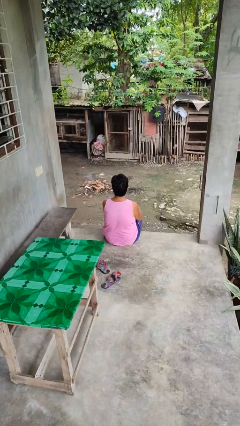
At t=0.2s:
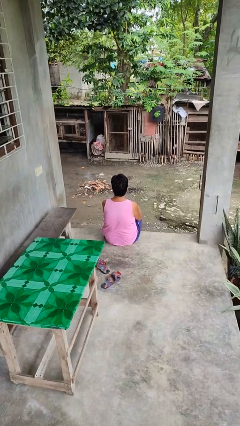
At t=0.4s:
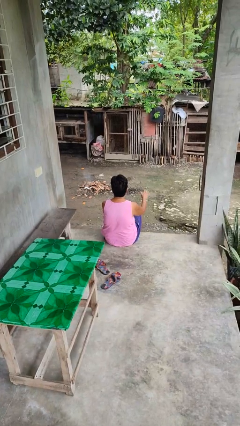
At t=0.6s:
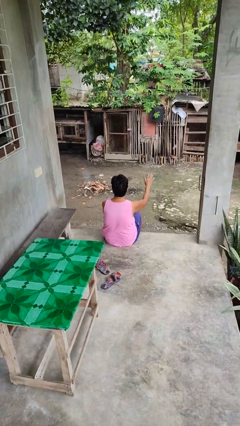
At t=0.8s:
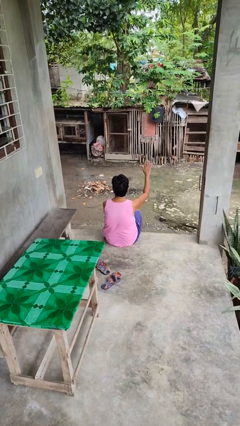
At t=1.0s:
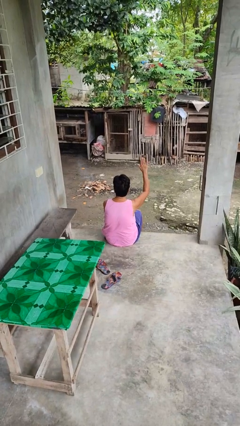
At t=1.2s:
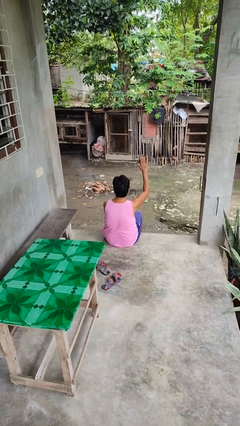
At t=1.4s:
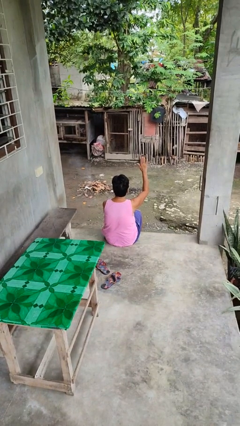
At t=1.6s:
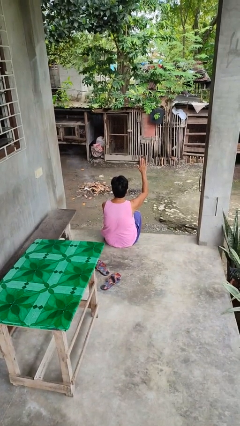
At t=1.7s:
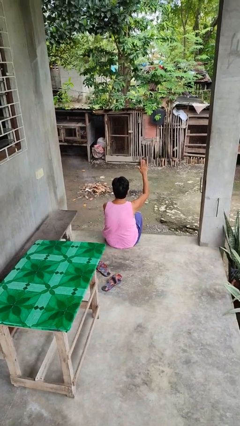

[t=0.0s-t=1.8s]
person gestures raise hand

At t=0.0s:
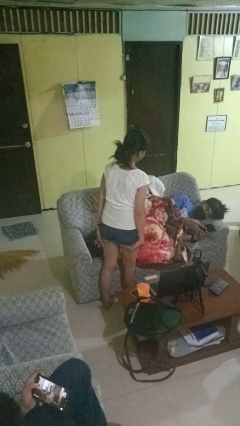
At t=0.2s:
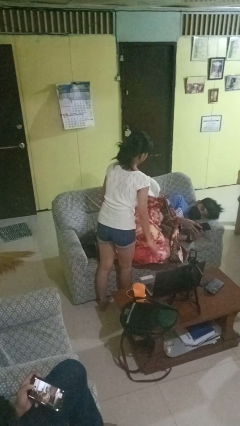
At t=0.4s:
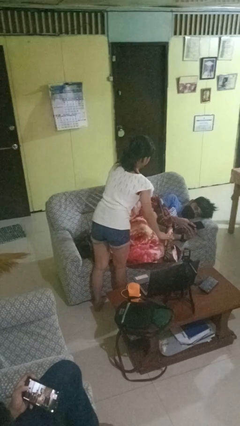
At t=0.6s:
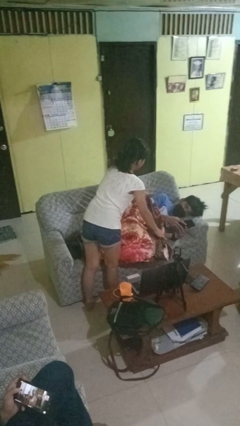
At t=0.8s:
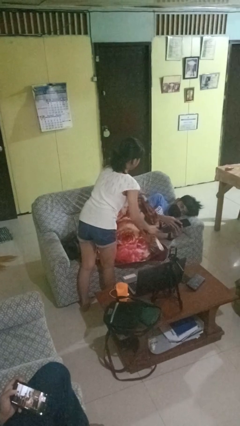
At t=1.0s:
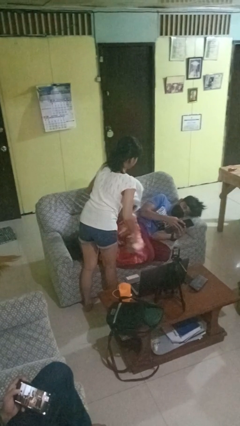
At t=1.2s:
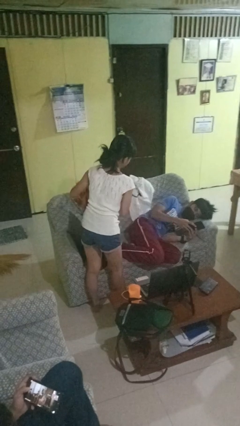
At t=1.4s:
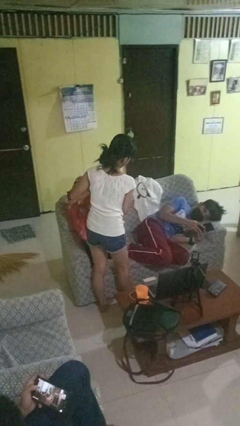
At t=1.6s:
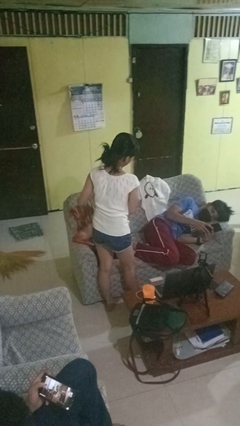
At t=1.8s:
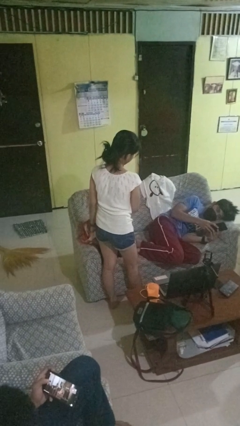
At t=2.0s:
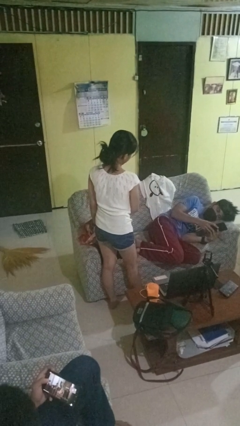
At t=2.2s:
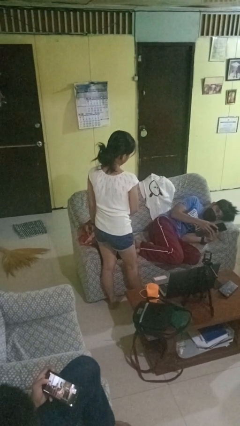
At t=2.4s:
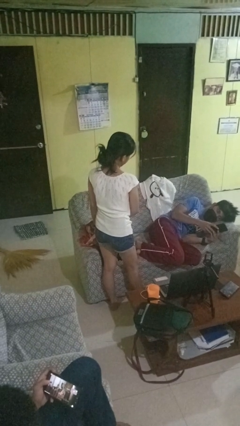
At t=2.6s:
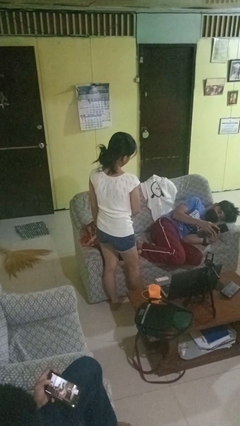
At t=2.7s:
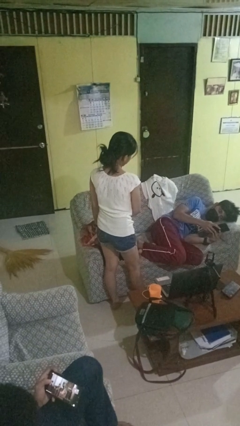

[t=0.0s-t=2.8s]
person uncovers friend with blanket

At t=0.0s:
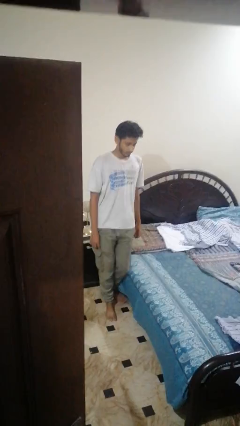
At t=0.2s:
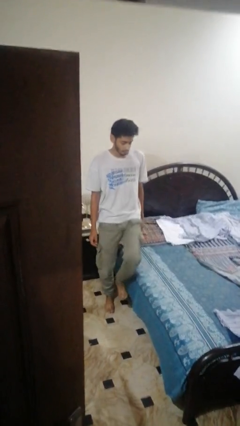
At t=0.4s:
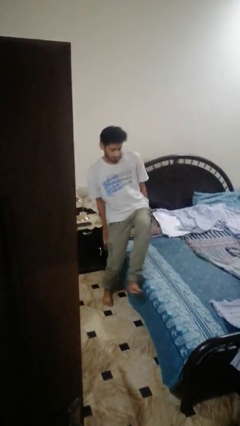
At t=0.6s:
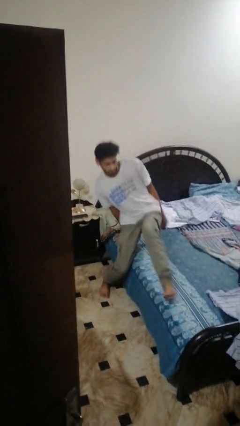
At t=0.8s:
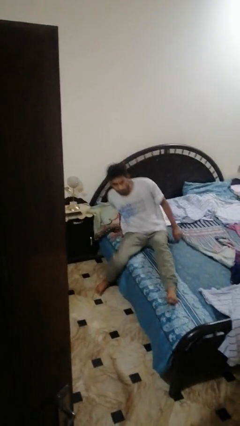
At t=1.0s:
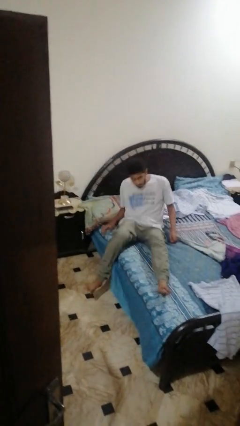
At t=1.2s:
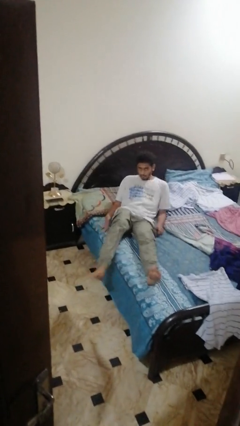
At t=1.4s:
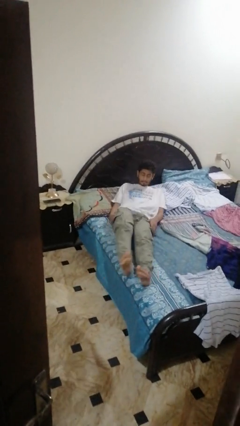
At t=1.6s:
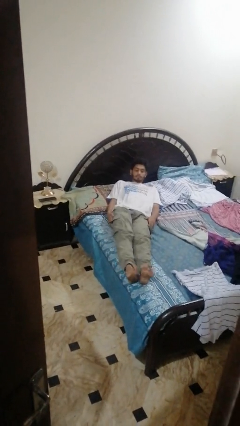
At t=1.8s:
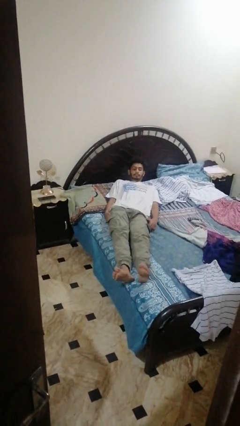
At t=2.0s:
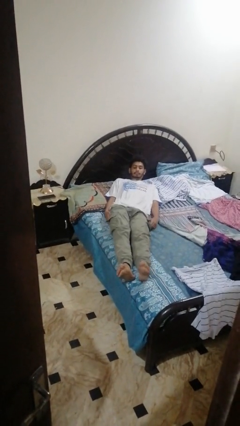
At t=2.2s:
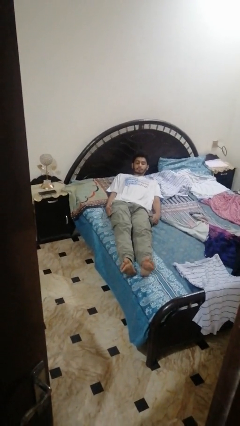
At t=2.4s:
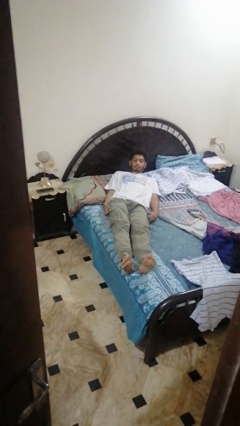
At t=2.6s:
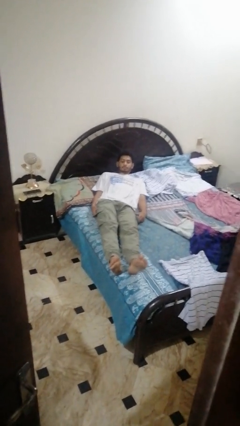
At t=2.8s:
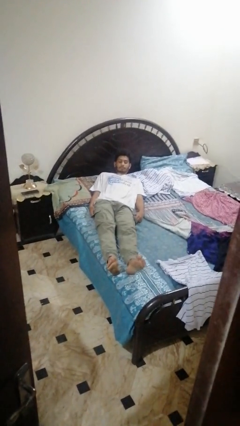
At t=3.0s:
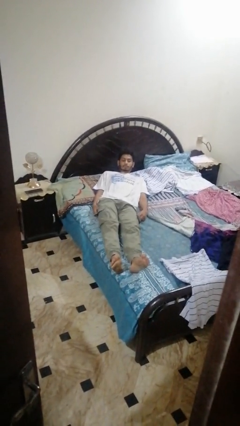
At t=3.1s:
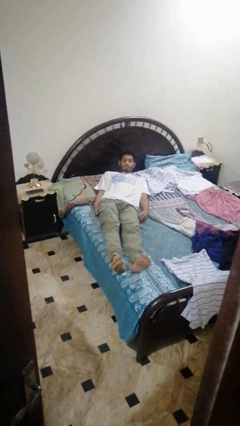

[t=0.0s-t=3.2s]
person lies down on bed

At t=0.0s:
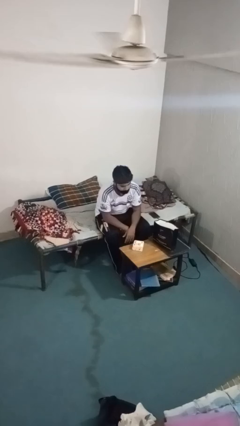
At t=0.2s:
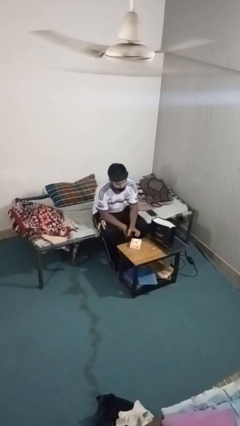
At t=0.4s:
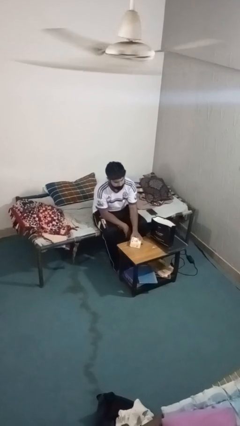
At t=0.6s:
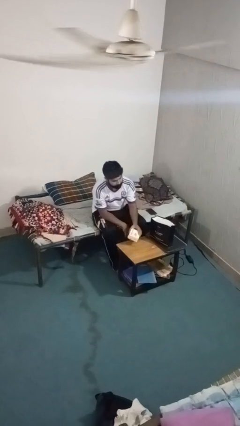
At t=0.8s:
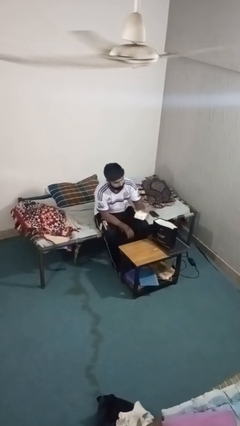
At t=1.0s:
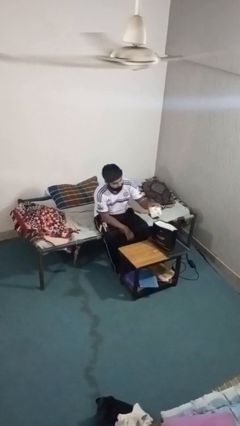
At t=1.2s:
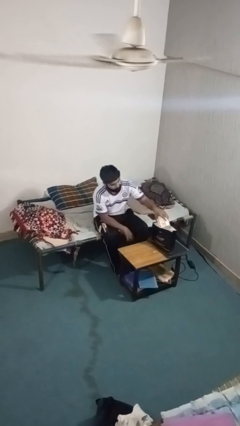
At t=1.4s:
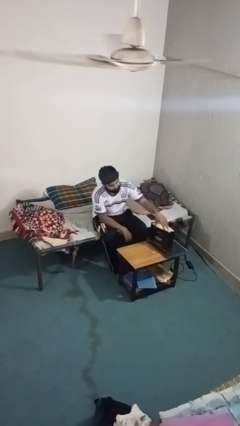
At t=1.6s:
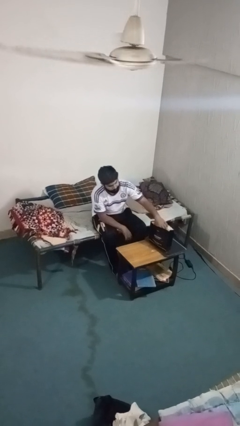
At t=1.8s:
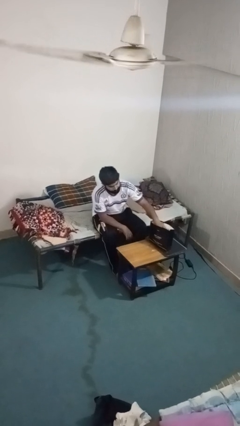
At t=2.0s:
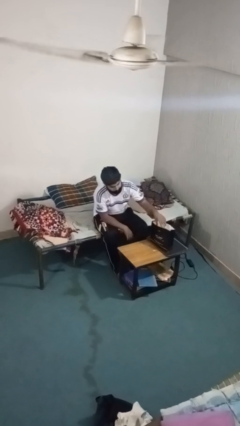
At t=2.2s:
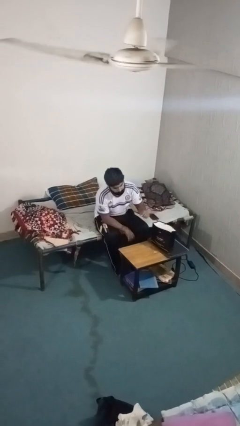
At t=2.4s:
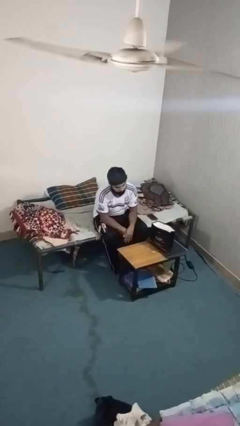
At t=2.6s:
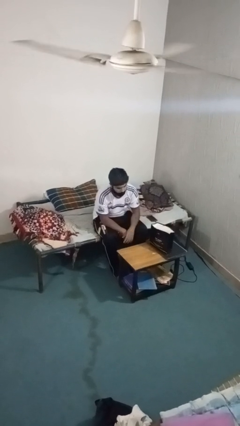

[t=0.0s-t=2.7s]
person puts object into bag

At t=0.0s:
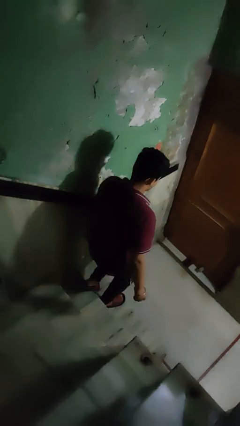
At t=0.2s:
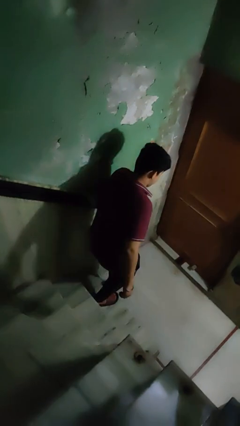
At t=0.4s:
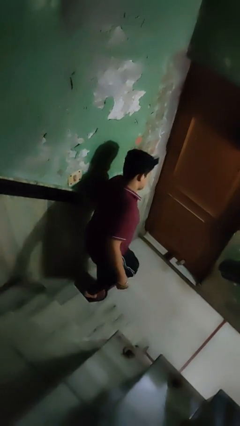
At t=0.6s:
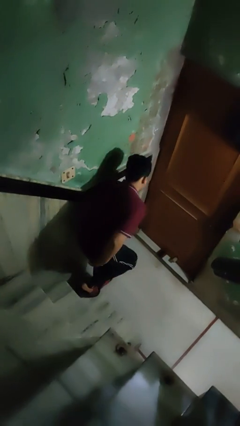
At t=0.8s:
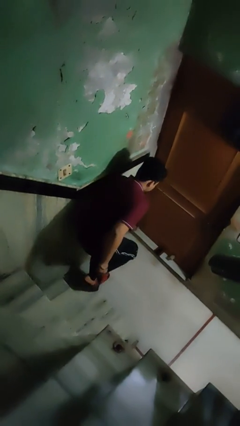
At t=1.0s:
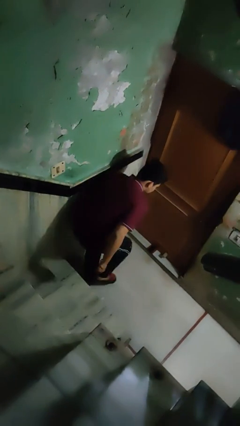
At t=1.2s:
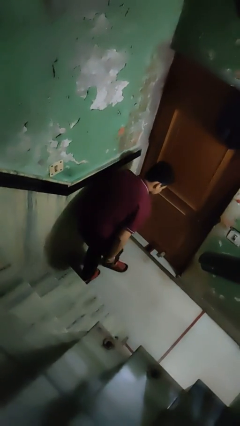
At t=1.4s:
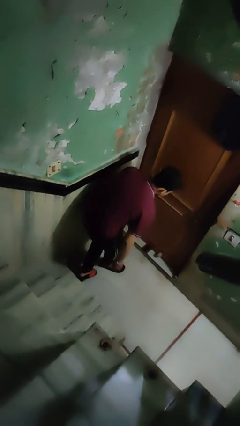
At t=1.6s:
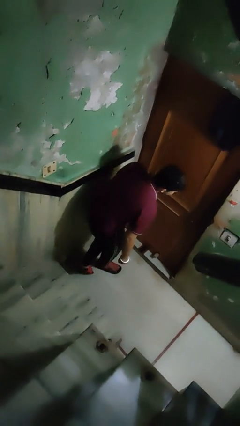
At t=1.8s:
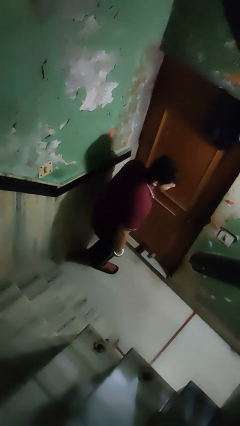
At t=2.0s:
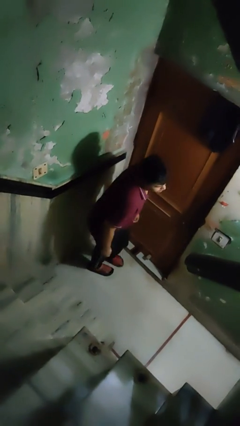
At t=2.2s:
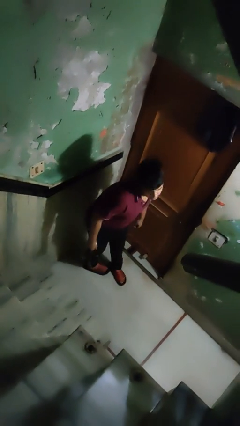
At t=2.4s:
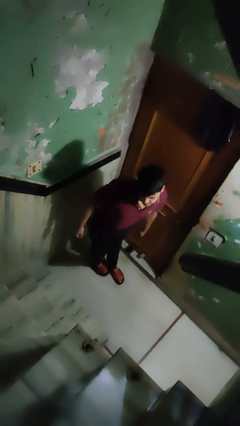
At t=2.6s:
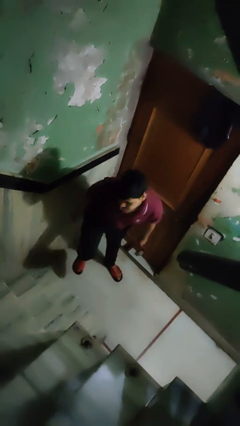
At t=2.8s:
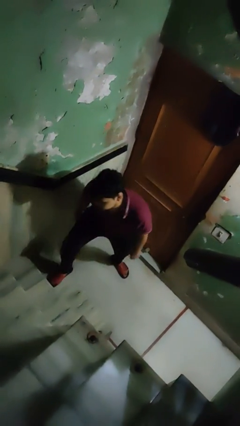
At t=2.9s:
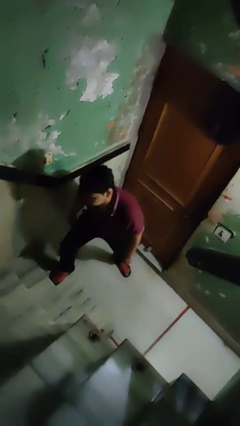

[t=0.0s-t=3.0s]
person trips on stair

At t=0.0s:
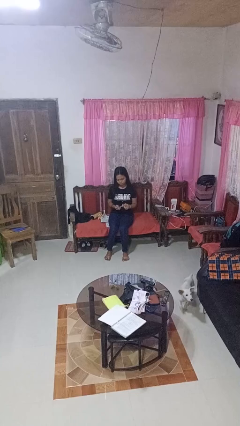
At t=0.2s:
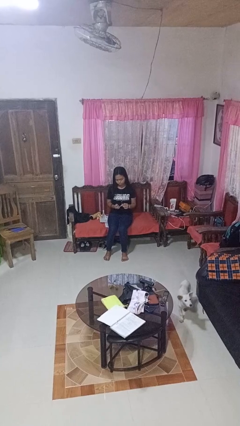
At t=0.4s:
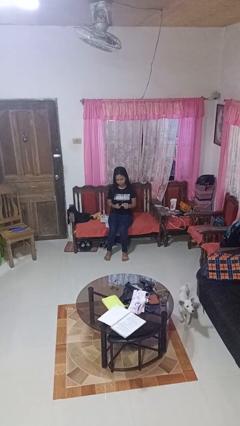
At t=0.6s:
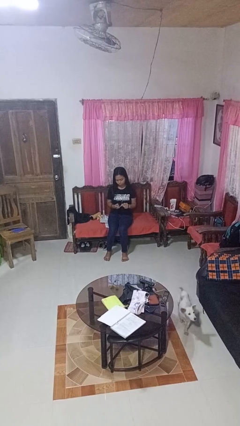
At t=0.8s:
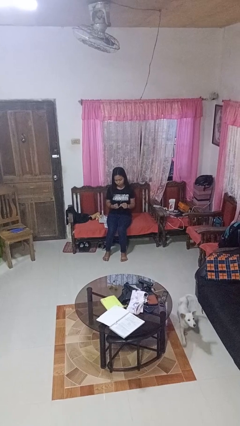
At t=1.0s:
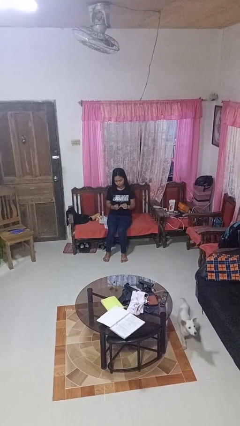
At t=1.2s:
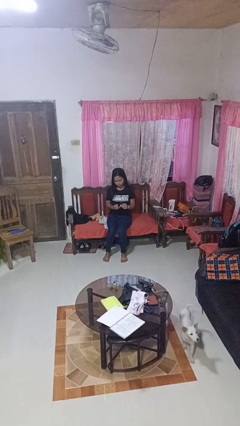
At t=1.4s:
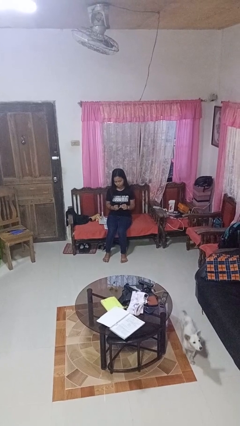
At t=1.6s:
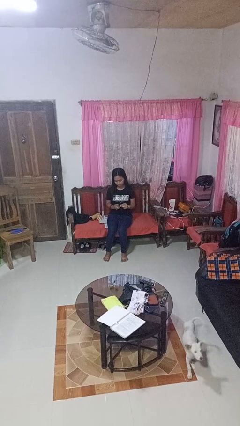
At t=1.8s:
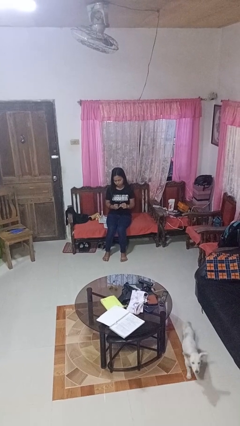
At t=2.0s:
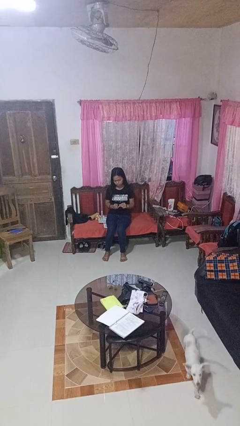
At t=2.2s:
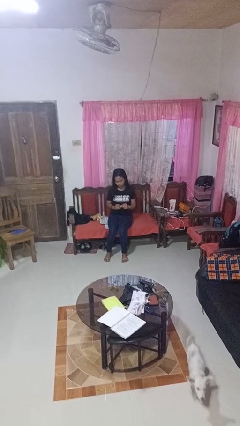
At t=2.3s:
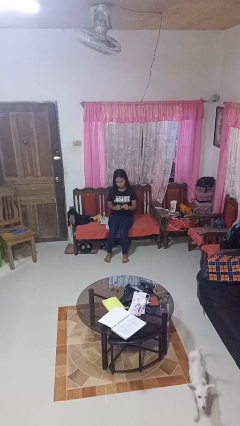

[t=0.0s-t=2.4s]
person clips fingernails

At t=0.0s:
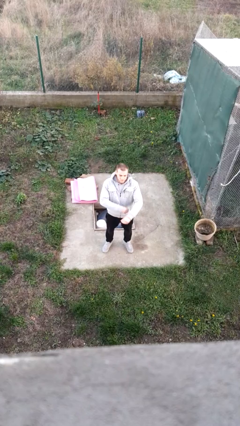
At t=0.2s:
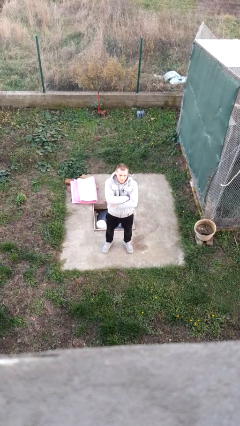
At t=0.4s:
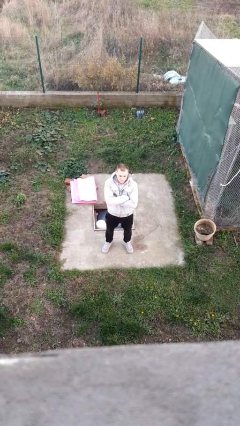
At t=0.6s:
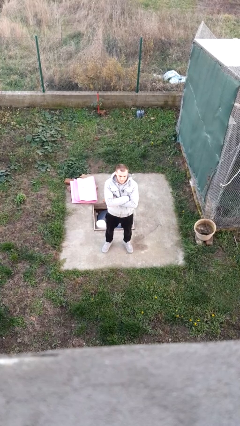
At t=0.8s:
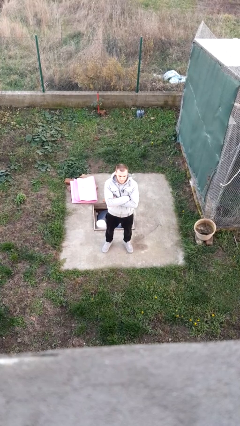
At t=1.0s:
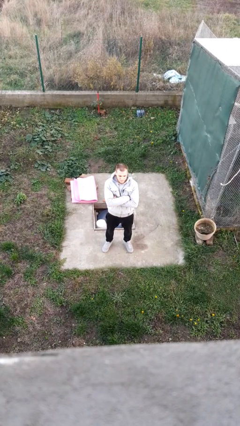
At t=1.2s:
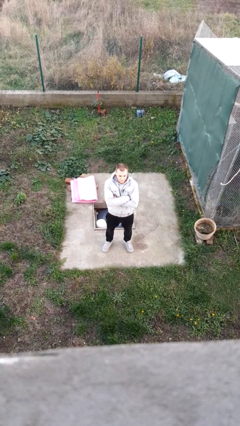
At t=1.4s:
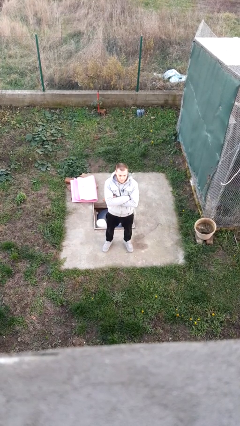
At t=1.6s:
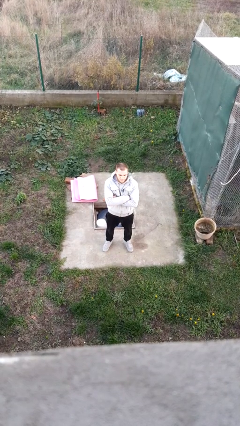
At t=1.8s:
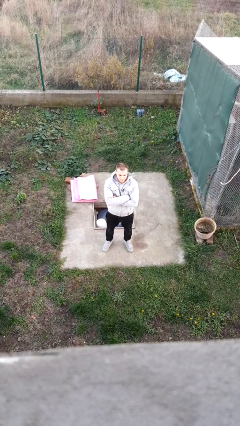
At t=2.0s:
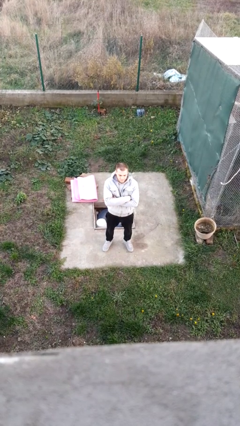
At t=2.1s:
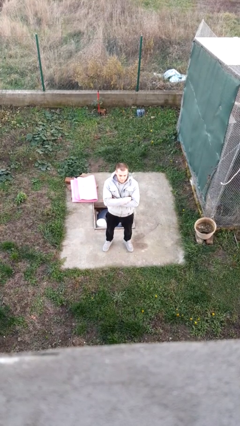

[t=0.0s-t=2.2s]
person crosses arms
